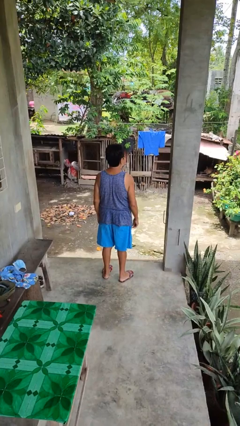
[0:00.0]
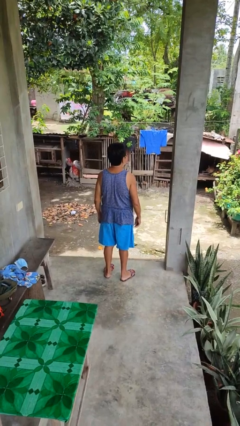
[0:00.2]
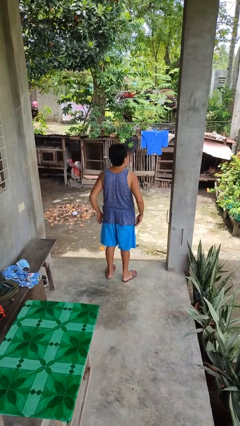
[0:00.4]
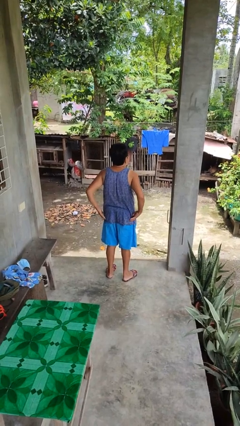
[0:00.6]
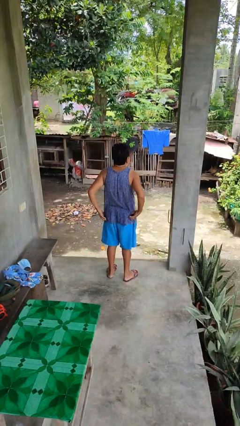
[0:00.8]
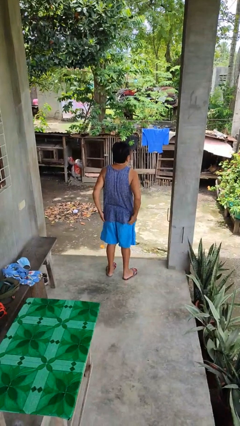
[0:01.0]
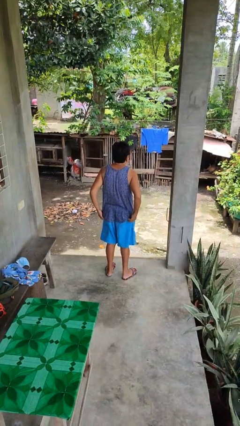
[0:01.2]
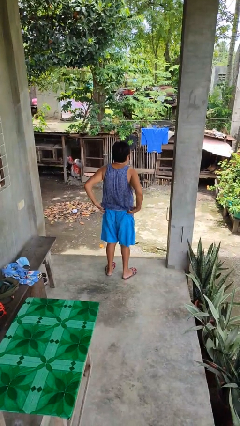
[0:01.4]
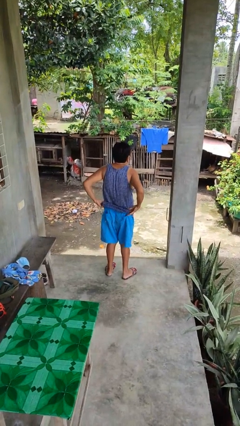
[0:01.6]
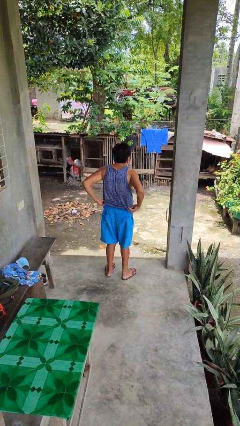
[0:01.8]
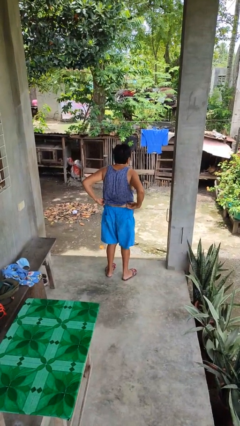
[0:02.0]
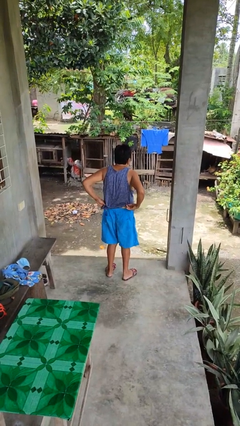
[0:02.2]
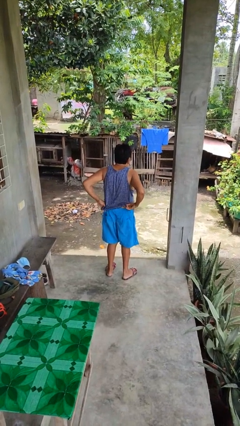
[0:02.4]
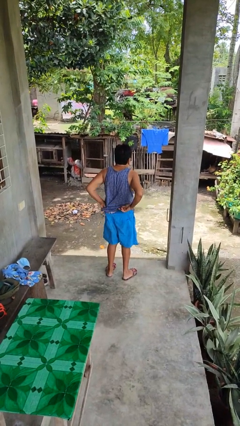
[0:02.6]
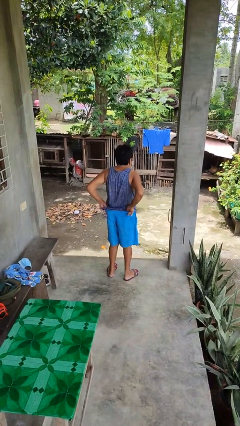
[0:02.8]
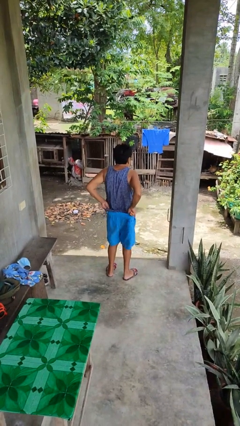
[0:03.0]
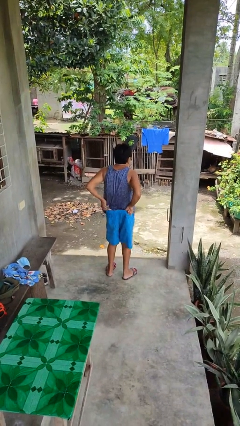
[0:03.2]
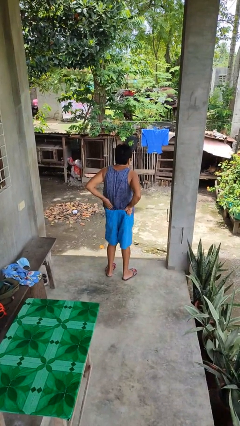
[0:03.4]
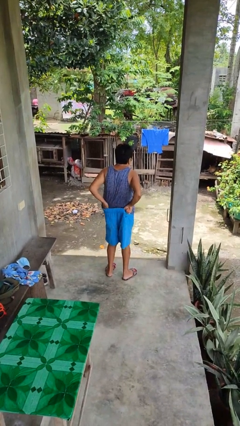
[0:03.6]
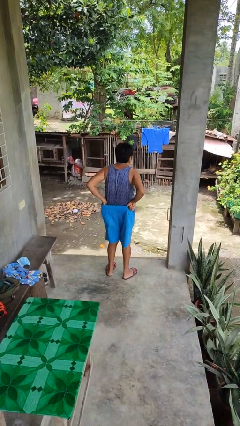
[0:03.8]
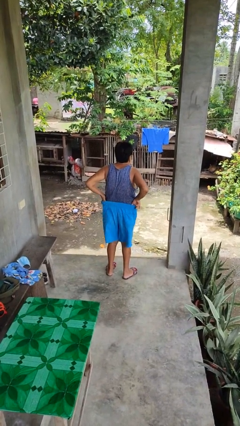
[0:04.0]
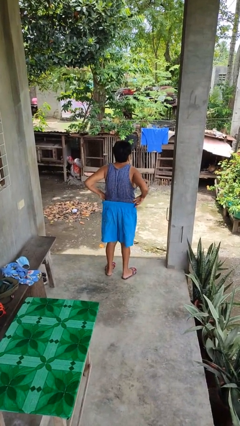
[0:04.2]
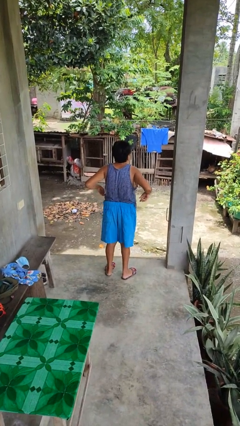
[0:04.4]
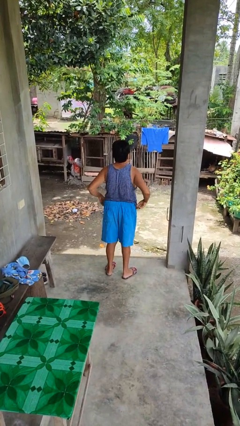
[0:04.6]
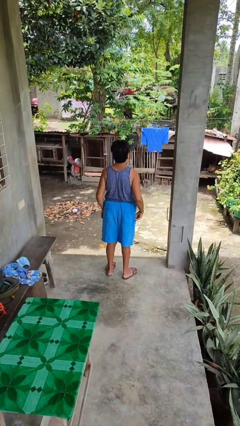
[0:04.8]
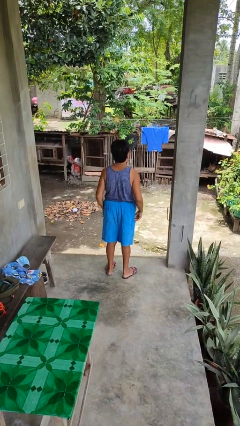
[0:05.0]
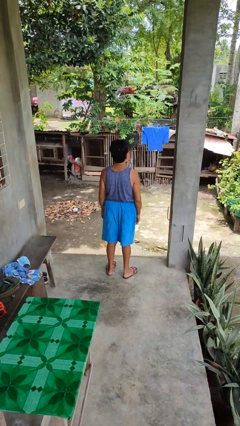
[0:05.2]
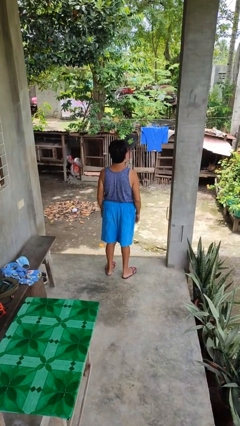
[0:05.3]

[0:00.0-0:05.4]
person tucks in shirt

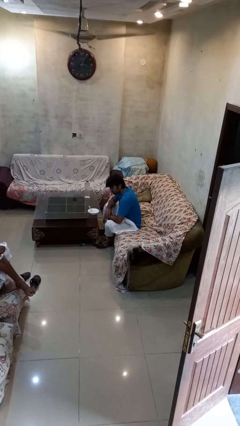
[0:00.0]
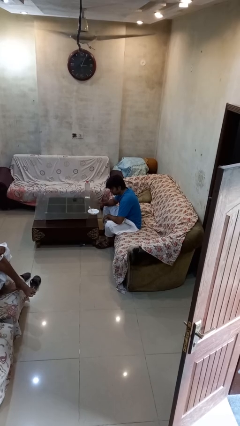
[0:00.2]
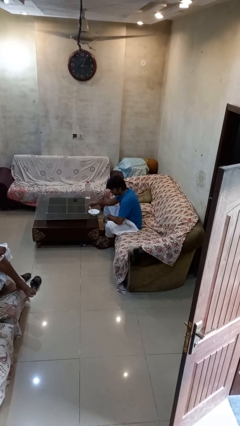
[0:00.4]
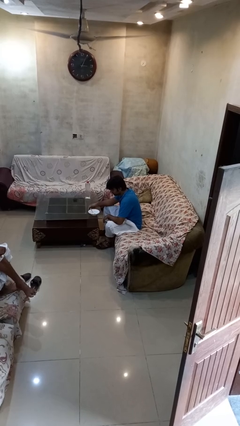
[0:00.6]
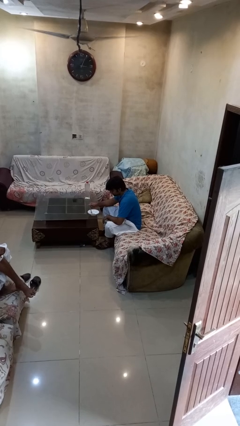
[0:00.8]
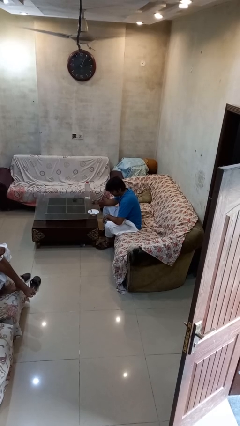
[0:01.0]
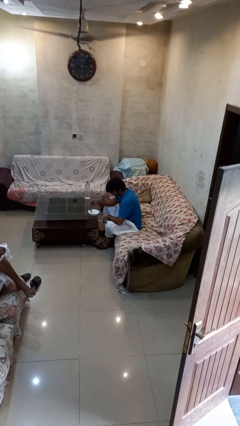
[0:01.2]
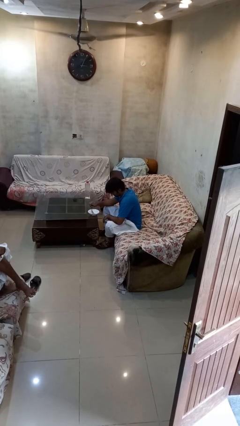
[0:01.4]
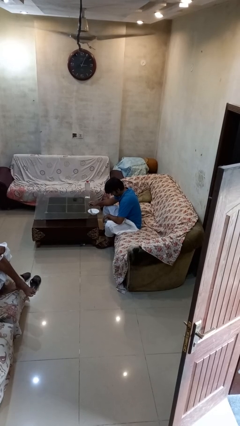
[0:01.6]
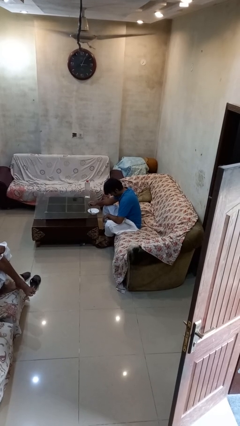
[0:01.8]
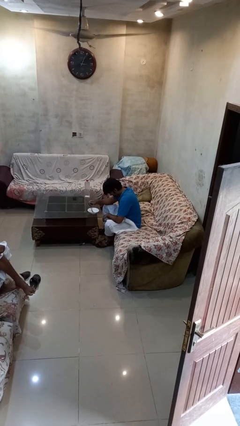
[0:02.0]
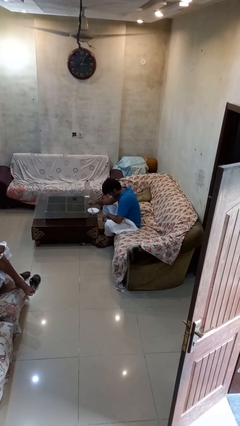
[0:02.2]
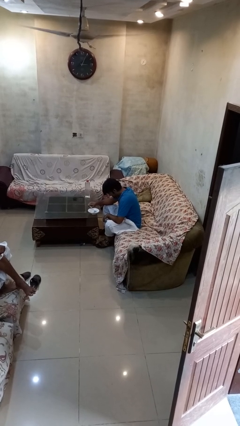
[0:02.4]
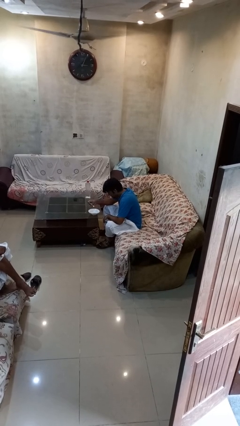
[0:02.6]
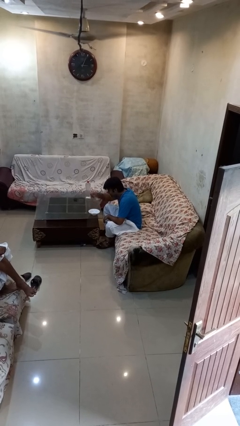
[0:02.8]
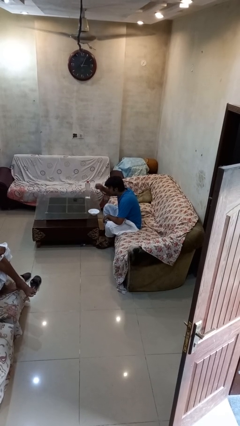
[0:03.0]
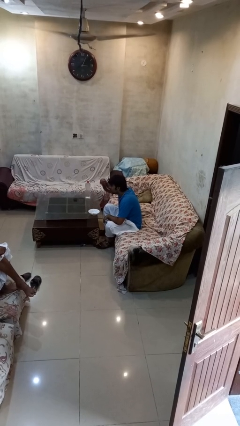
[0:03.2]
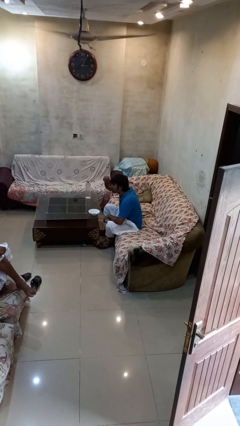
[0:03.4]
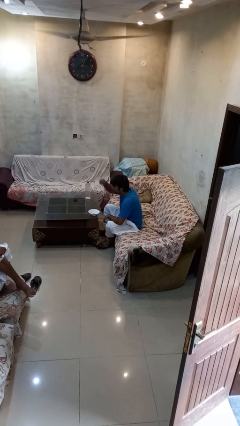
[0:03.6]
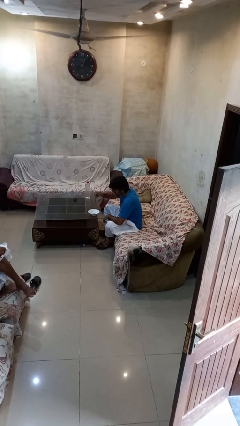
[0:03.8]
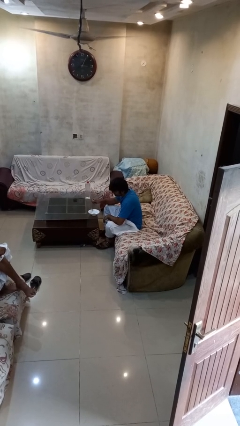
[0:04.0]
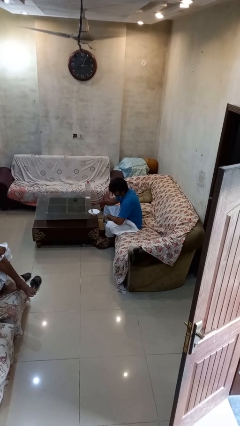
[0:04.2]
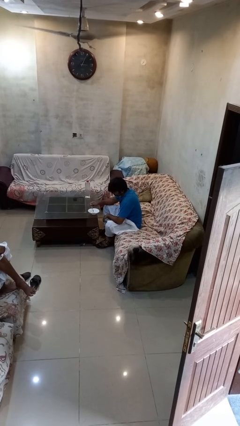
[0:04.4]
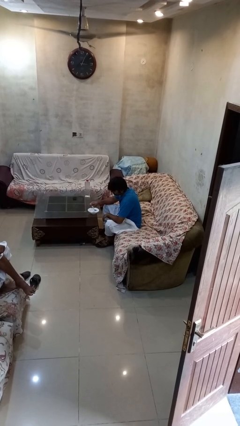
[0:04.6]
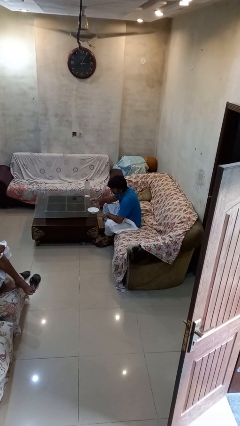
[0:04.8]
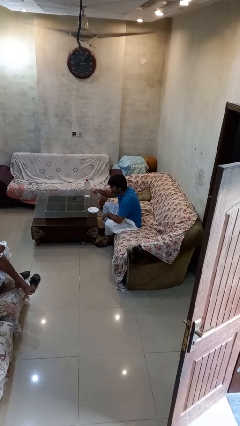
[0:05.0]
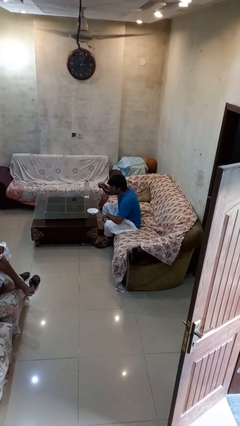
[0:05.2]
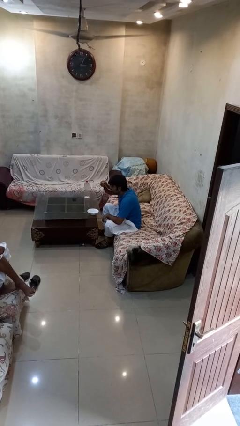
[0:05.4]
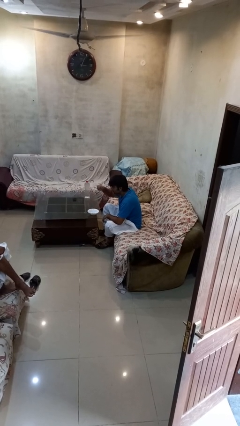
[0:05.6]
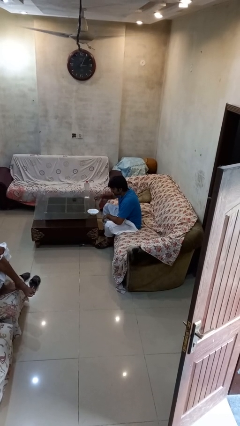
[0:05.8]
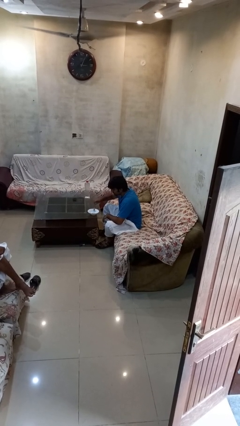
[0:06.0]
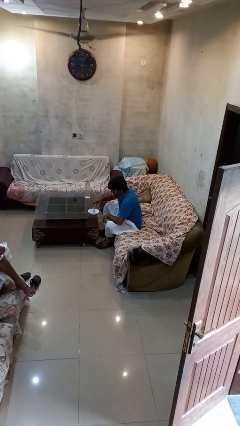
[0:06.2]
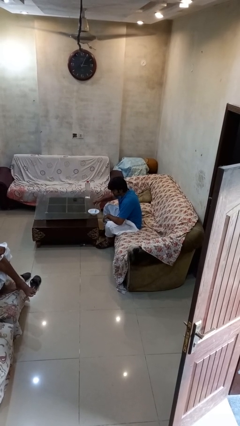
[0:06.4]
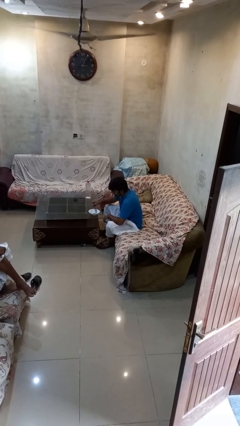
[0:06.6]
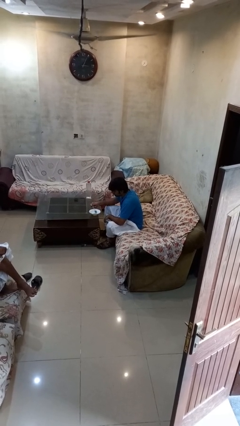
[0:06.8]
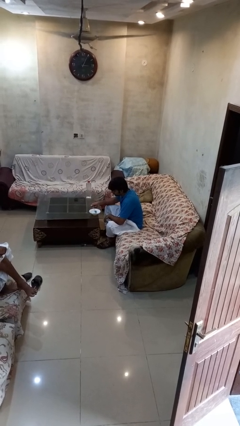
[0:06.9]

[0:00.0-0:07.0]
person eats with utensil

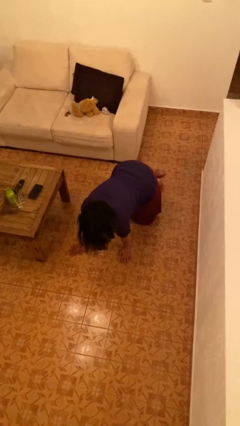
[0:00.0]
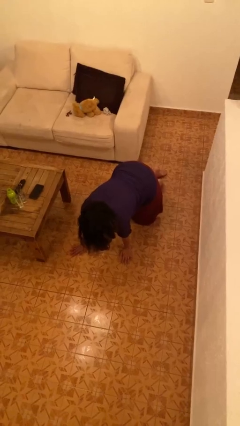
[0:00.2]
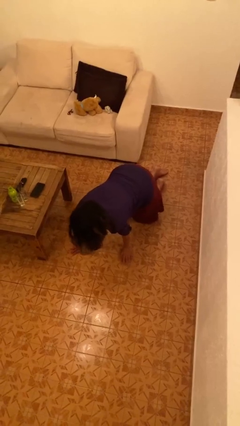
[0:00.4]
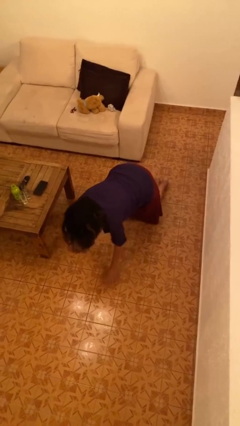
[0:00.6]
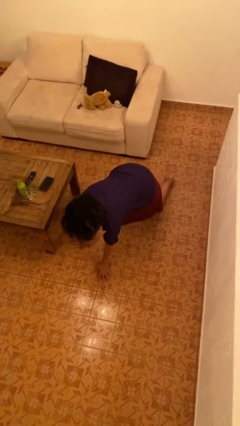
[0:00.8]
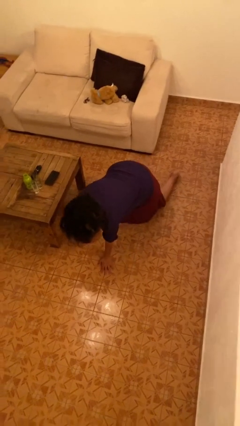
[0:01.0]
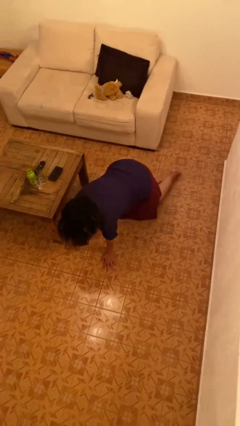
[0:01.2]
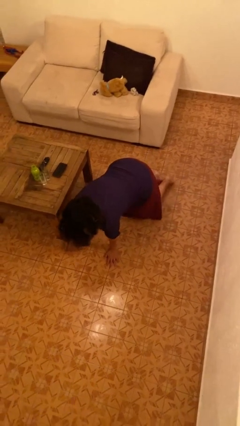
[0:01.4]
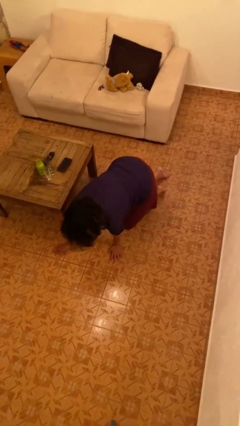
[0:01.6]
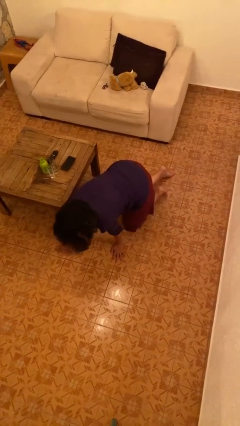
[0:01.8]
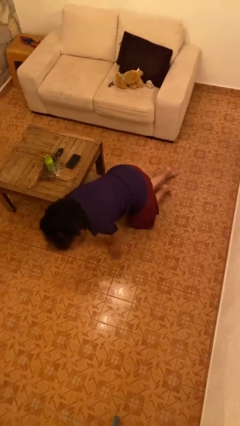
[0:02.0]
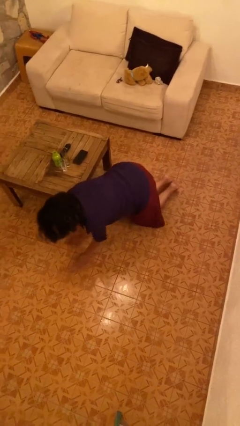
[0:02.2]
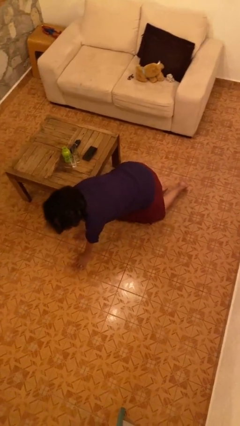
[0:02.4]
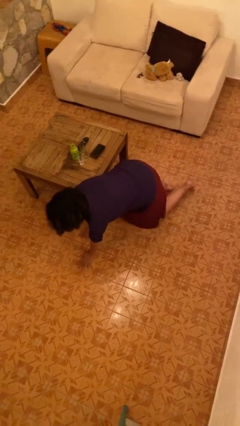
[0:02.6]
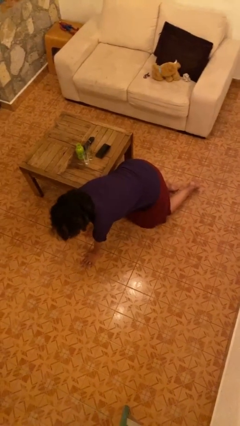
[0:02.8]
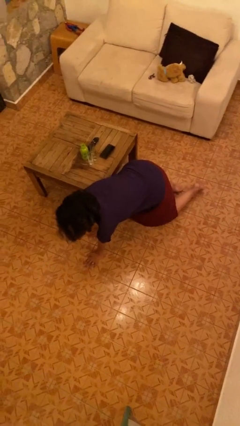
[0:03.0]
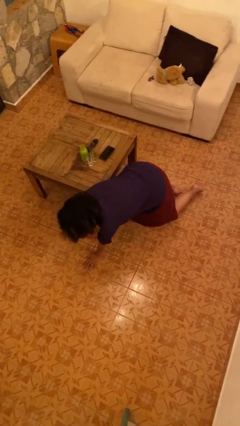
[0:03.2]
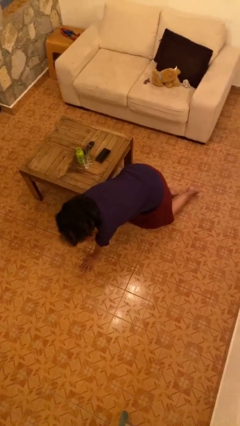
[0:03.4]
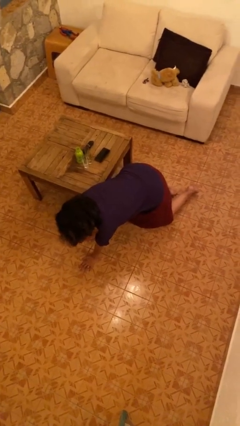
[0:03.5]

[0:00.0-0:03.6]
person crawls

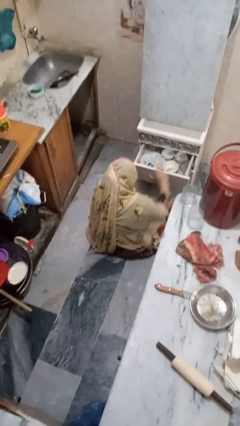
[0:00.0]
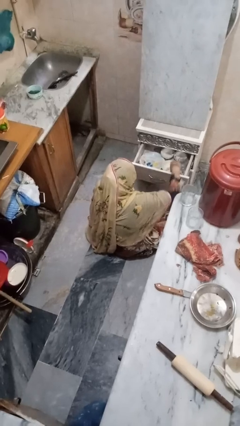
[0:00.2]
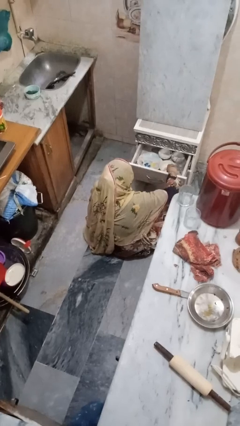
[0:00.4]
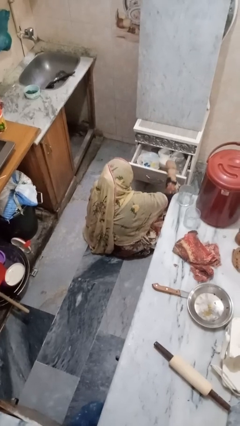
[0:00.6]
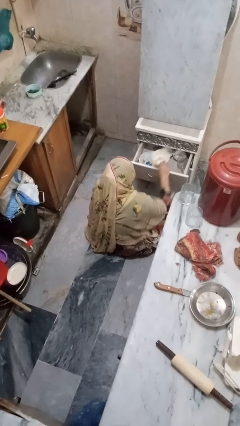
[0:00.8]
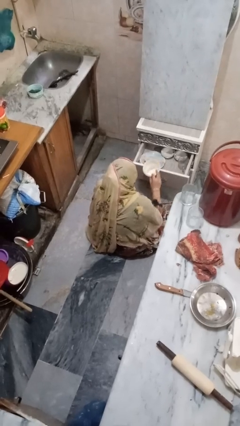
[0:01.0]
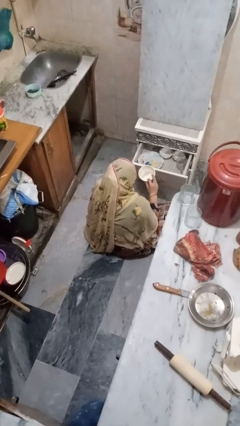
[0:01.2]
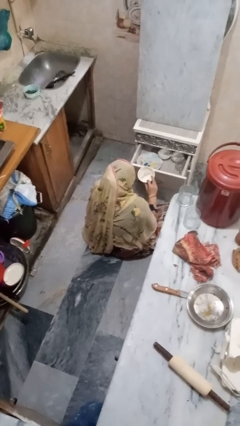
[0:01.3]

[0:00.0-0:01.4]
person takes object from kitchen drawer

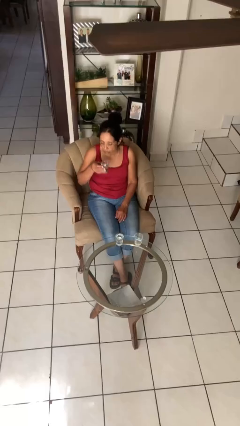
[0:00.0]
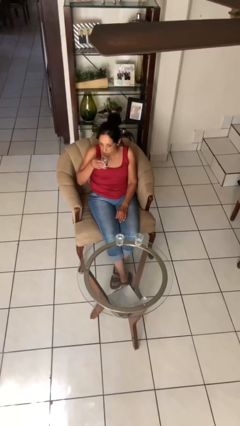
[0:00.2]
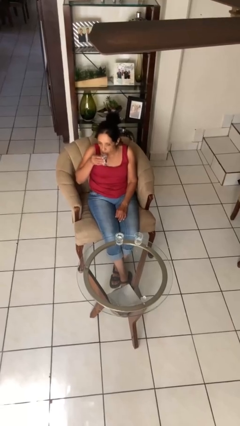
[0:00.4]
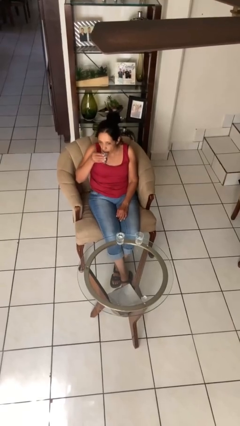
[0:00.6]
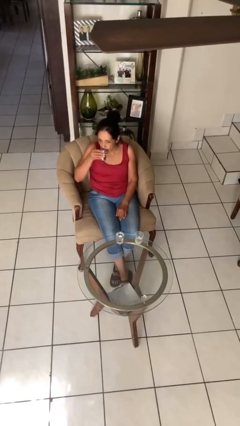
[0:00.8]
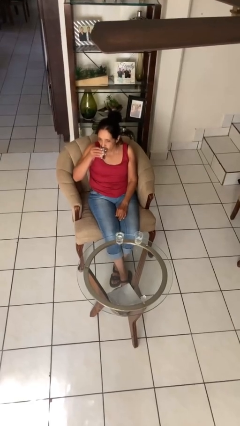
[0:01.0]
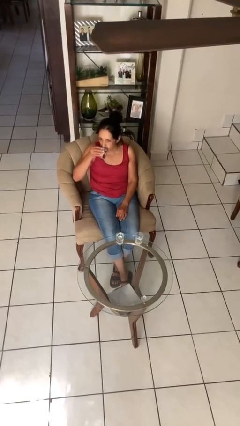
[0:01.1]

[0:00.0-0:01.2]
person drinks from shotglass
